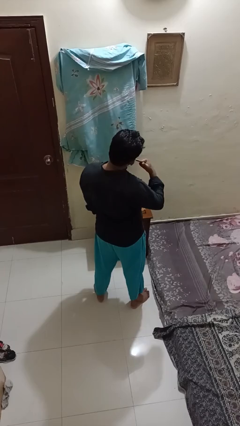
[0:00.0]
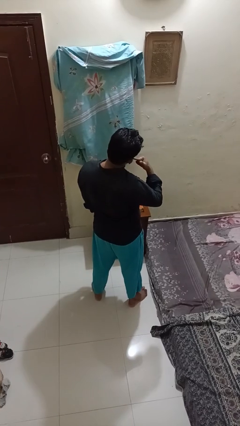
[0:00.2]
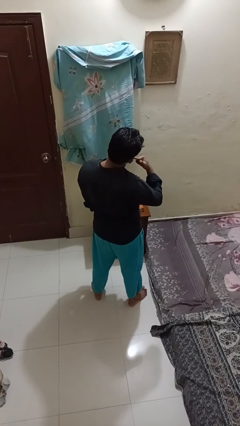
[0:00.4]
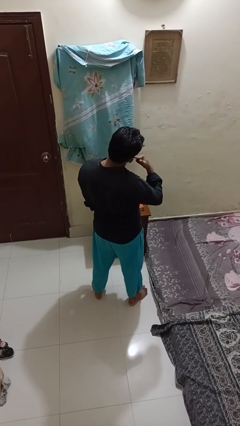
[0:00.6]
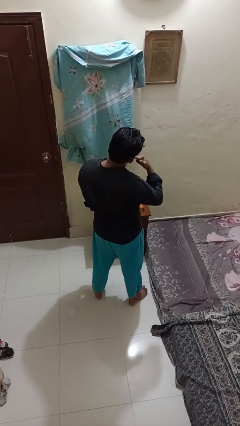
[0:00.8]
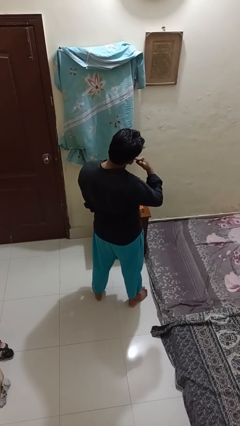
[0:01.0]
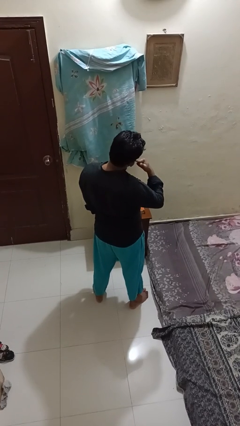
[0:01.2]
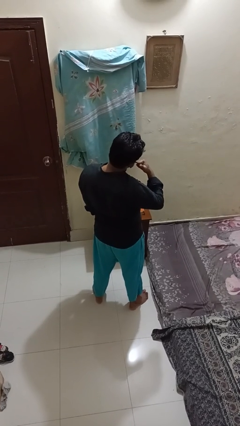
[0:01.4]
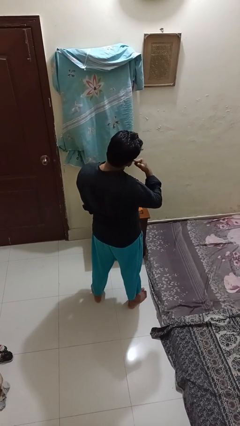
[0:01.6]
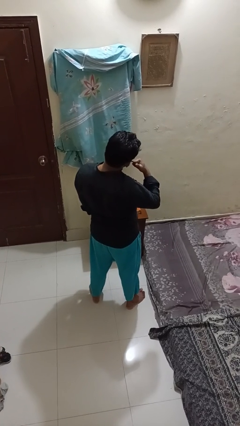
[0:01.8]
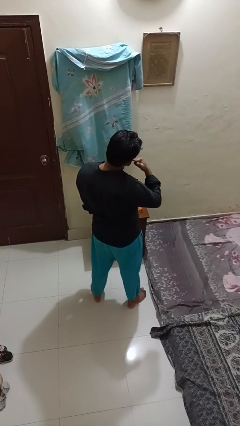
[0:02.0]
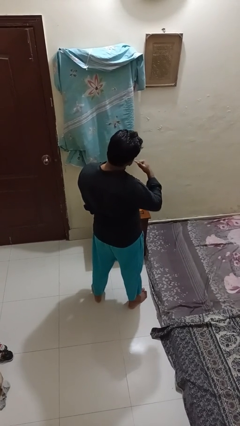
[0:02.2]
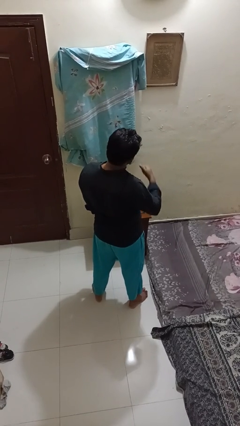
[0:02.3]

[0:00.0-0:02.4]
person gestures call me

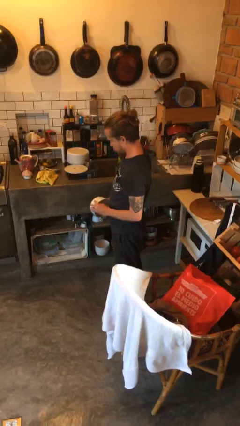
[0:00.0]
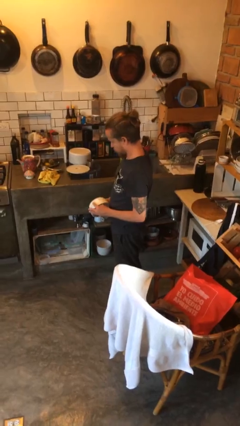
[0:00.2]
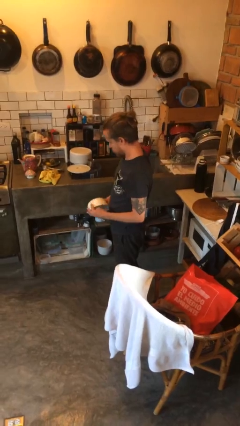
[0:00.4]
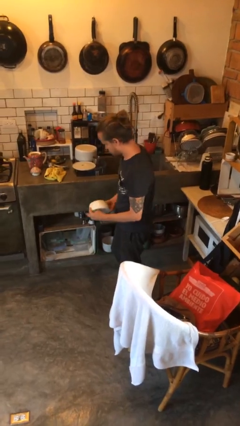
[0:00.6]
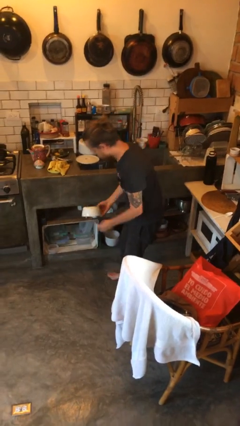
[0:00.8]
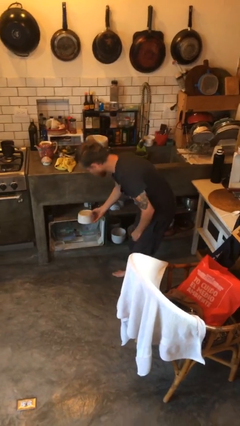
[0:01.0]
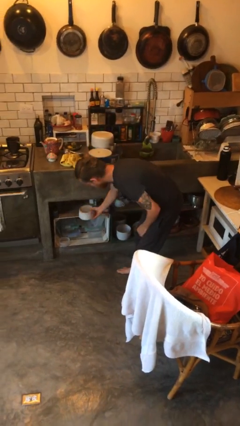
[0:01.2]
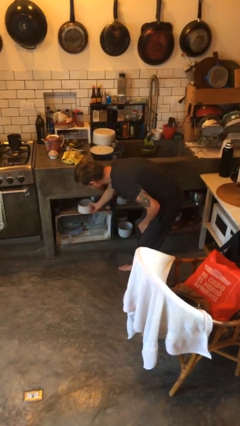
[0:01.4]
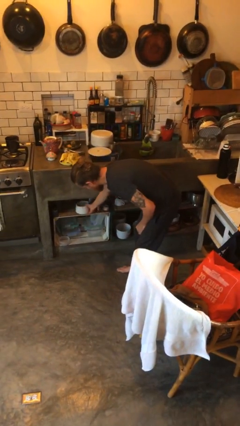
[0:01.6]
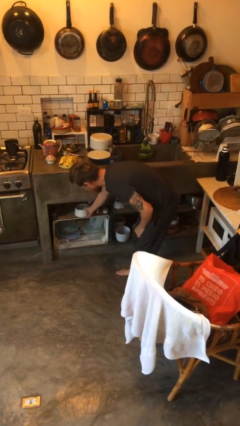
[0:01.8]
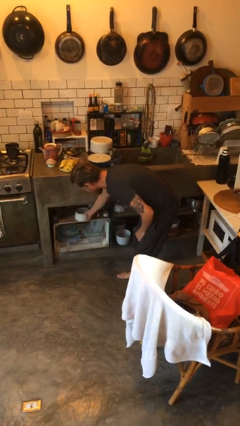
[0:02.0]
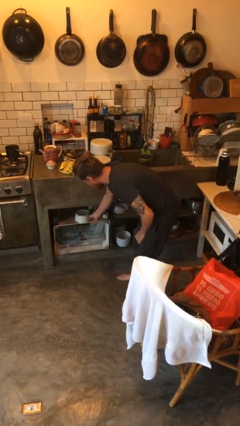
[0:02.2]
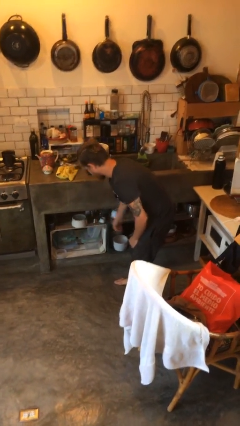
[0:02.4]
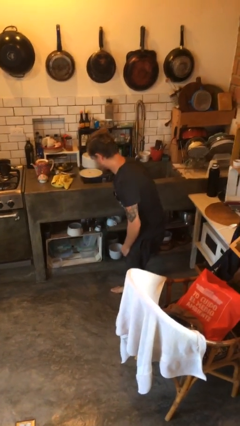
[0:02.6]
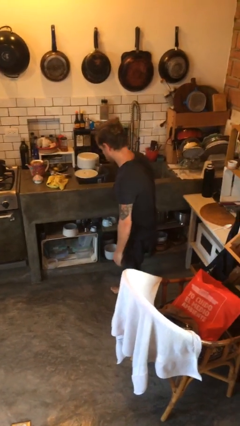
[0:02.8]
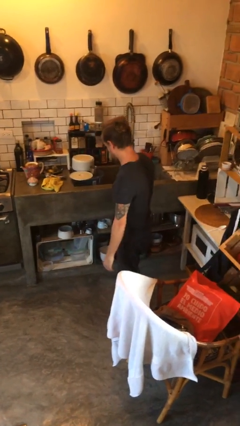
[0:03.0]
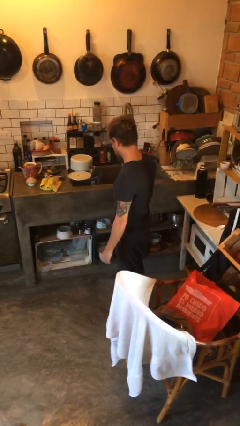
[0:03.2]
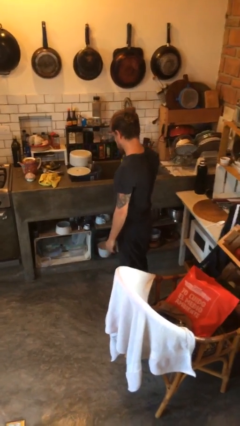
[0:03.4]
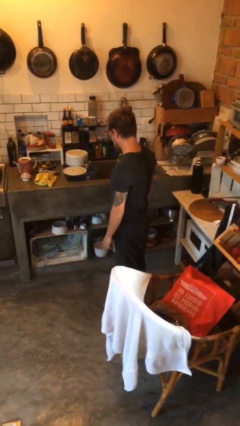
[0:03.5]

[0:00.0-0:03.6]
person puts down object into cabinet

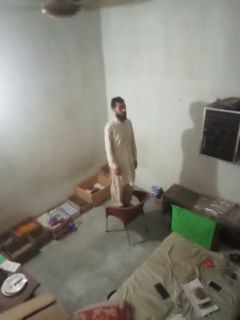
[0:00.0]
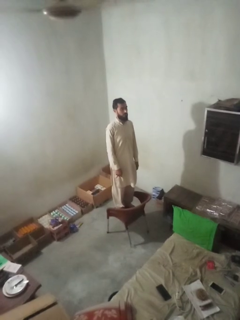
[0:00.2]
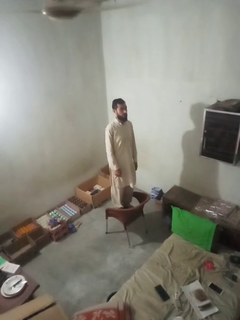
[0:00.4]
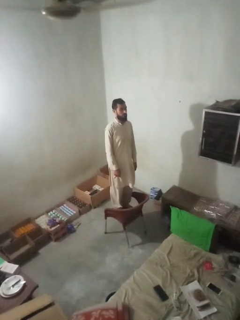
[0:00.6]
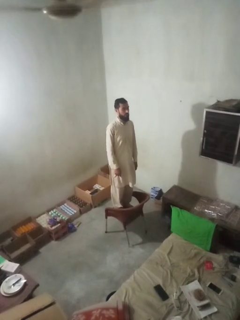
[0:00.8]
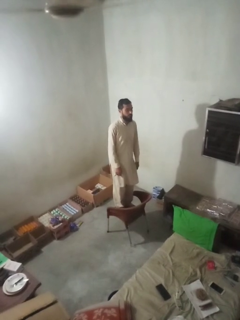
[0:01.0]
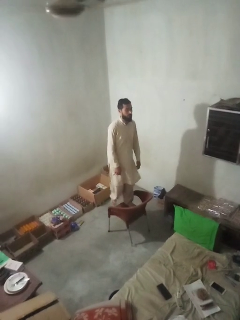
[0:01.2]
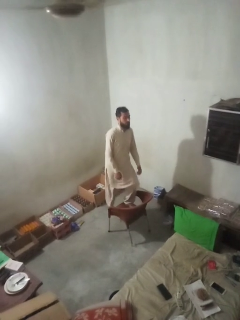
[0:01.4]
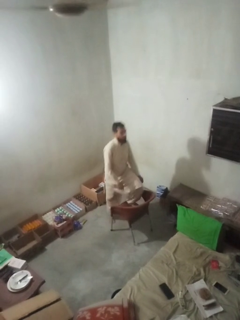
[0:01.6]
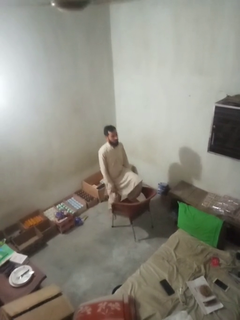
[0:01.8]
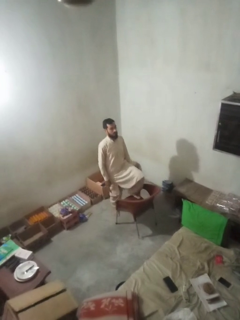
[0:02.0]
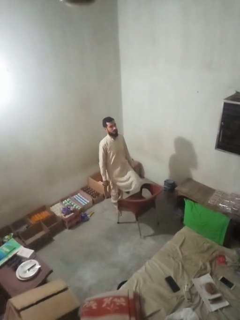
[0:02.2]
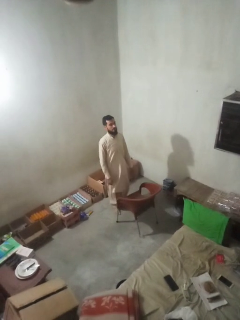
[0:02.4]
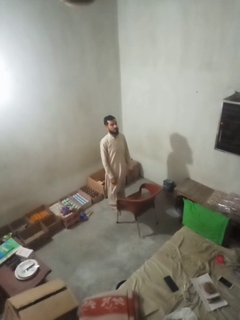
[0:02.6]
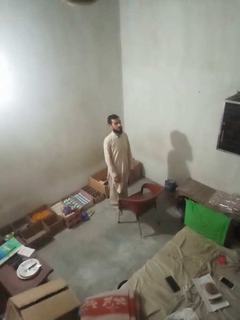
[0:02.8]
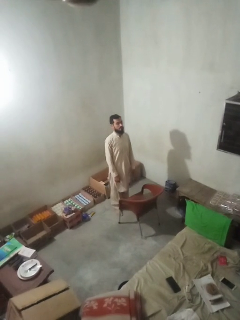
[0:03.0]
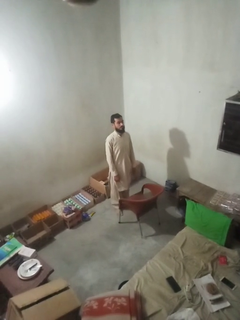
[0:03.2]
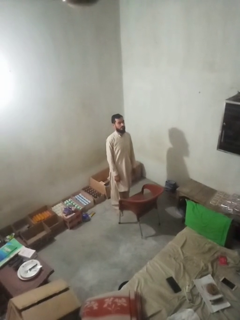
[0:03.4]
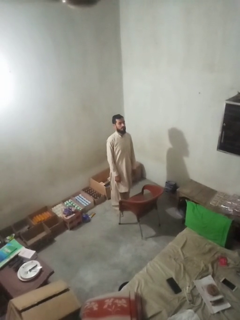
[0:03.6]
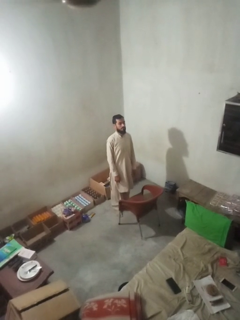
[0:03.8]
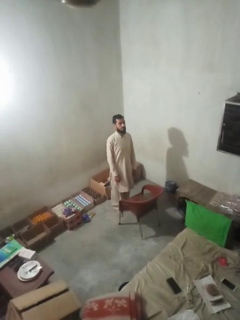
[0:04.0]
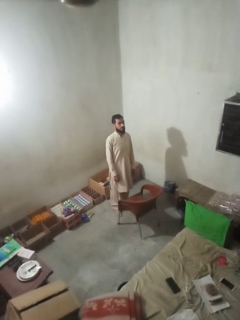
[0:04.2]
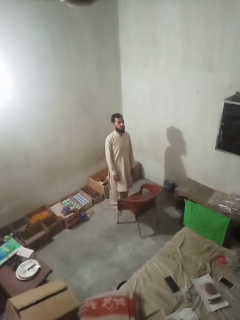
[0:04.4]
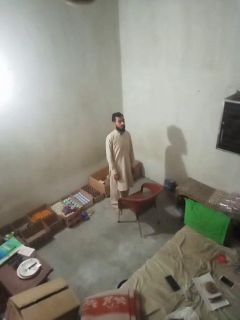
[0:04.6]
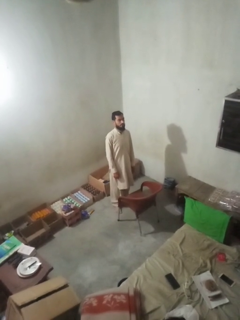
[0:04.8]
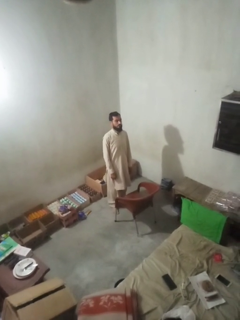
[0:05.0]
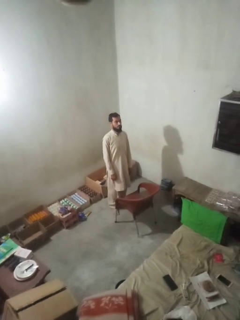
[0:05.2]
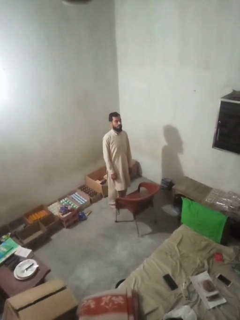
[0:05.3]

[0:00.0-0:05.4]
person climbs off chair

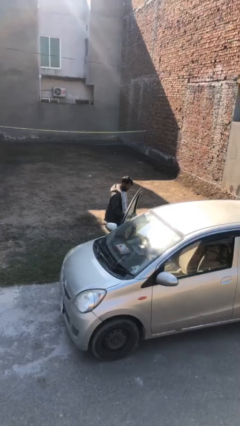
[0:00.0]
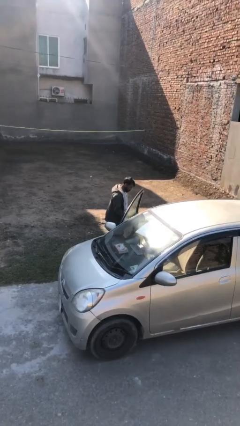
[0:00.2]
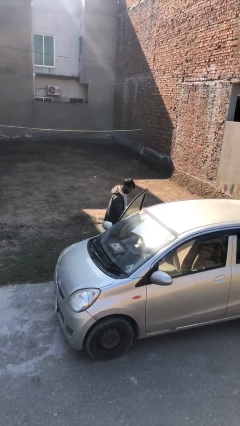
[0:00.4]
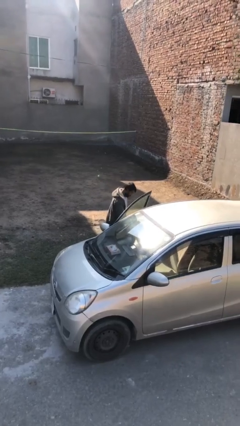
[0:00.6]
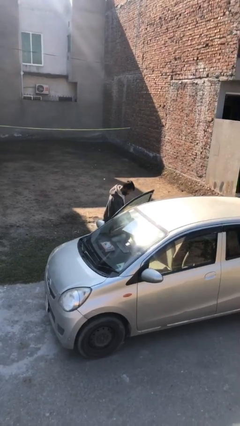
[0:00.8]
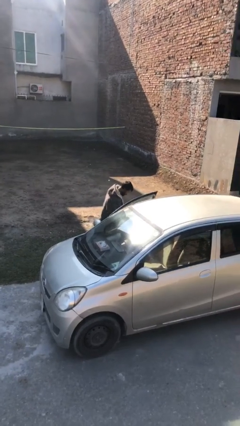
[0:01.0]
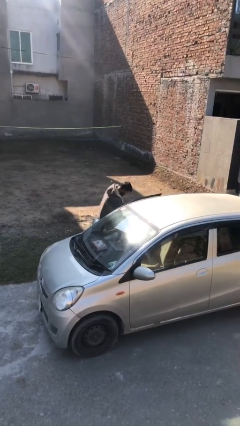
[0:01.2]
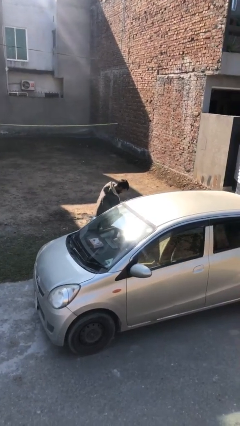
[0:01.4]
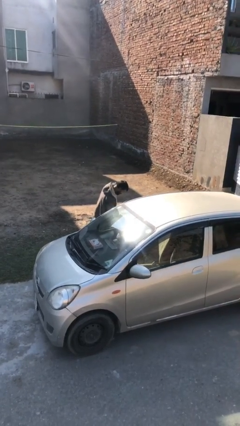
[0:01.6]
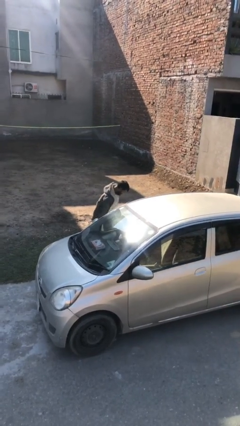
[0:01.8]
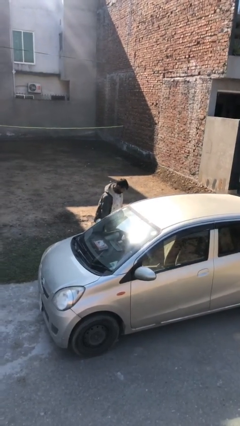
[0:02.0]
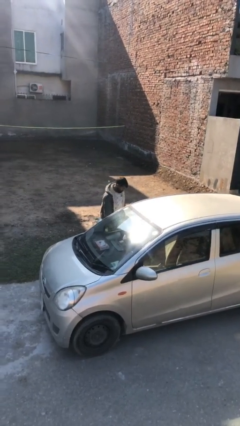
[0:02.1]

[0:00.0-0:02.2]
person closes car door

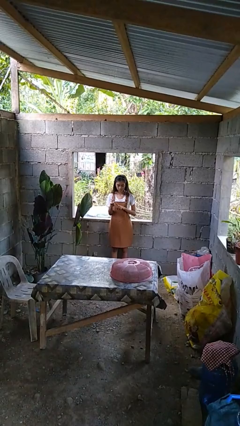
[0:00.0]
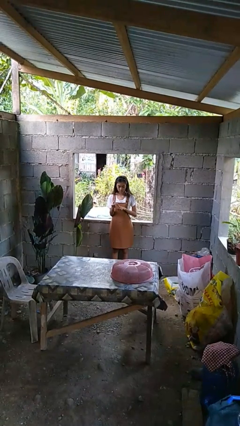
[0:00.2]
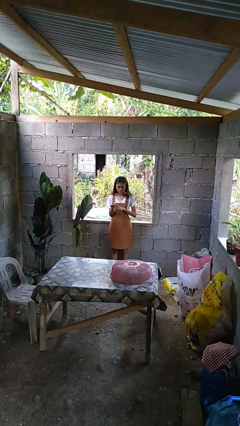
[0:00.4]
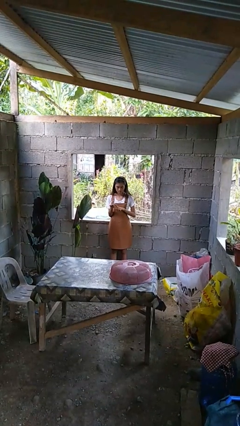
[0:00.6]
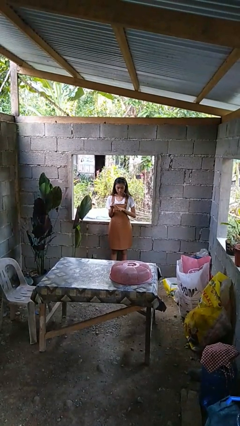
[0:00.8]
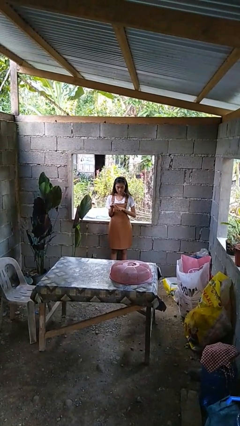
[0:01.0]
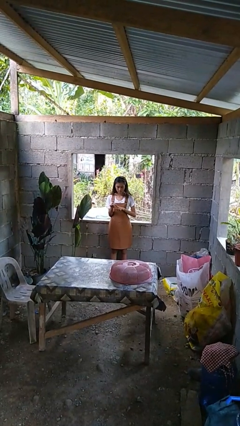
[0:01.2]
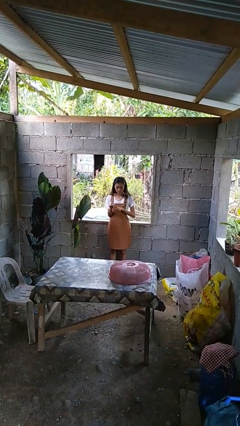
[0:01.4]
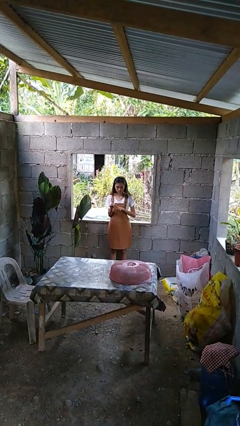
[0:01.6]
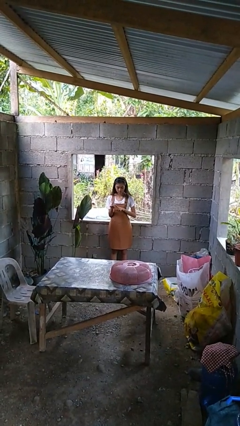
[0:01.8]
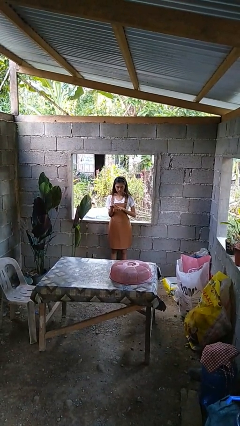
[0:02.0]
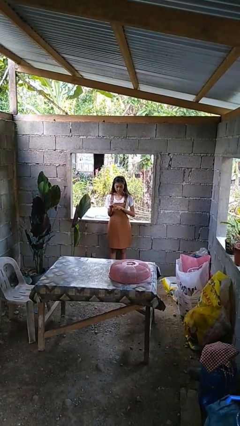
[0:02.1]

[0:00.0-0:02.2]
person clips fingernails

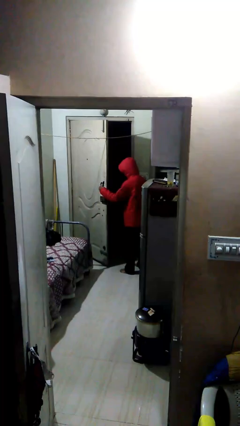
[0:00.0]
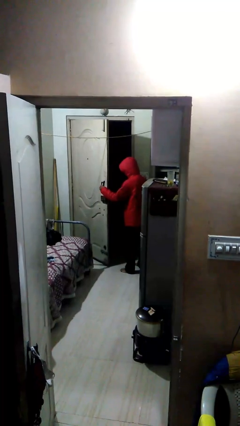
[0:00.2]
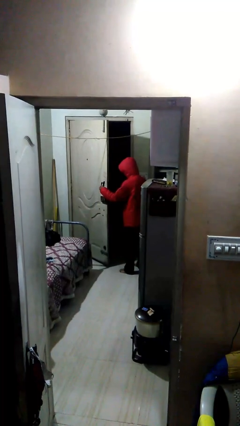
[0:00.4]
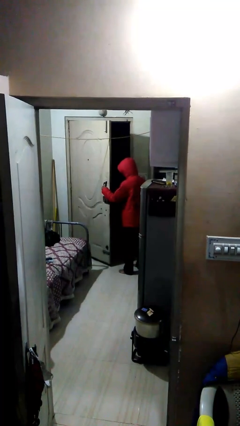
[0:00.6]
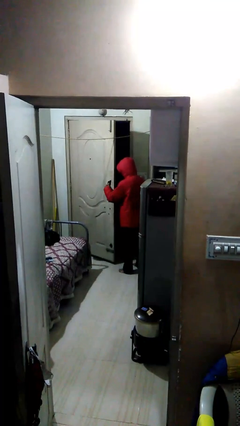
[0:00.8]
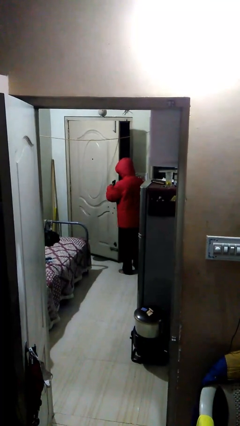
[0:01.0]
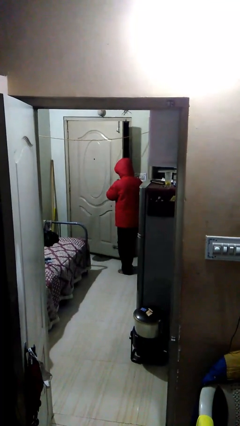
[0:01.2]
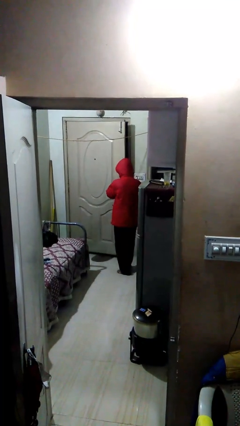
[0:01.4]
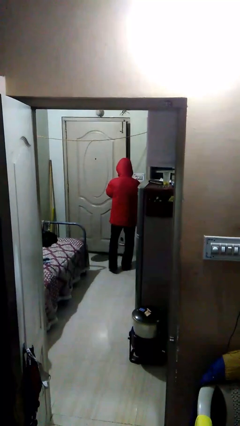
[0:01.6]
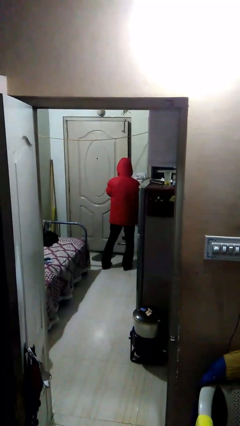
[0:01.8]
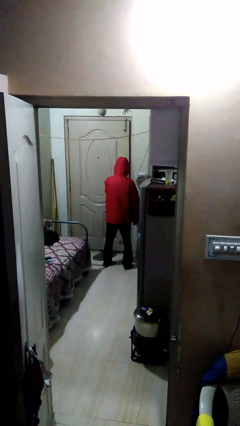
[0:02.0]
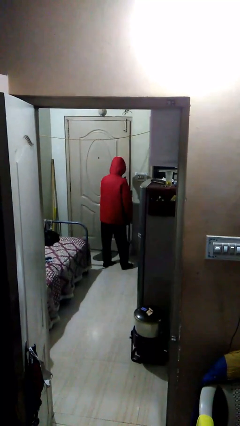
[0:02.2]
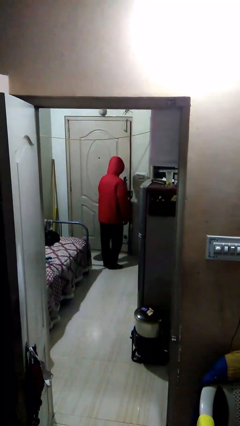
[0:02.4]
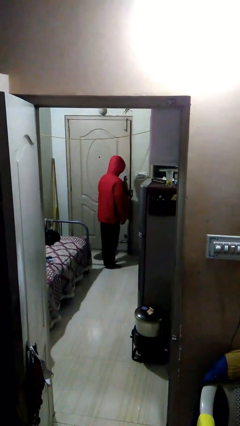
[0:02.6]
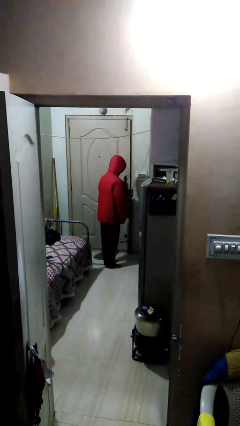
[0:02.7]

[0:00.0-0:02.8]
person closes facility door
